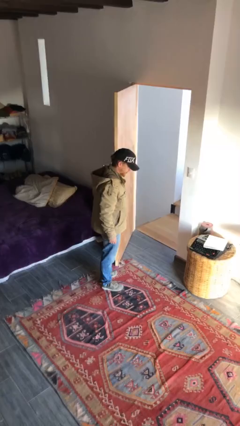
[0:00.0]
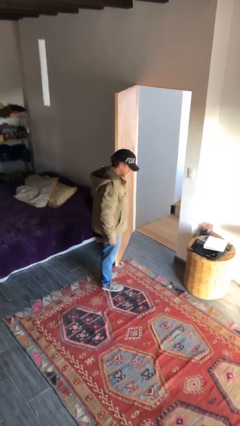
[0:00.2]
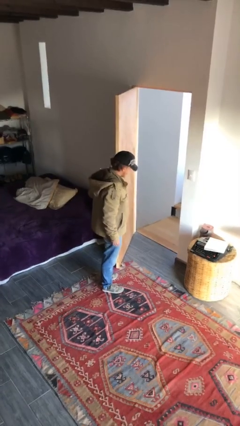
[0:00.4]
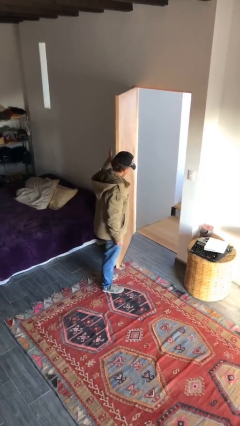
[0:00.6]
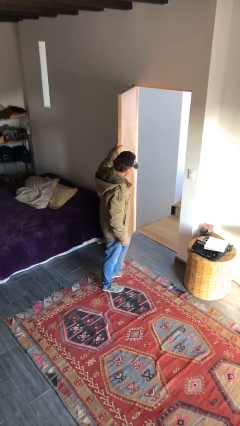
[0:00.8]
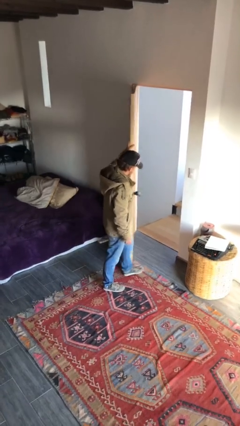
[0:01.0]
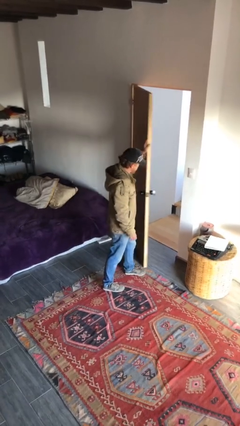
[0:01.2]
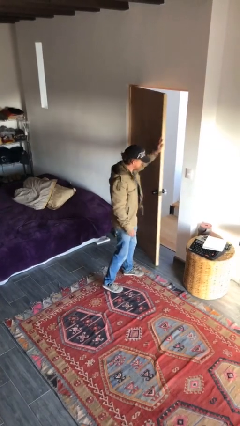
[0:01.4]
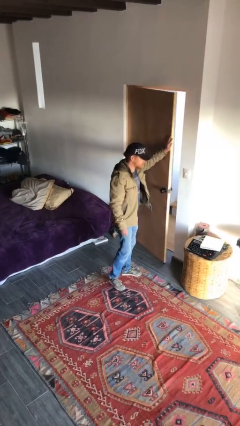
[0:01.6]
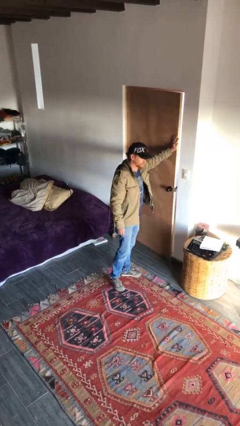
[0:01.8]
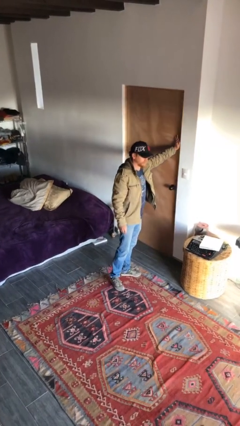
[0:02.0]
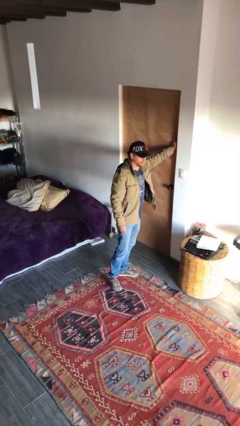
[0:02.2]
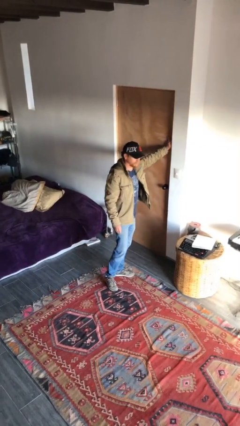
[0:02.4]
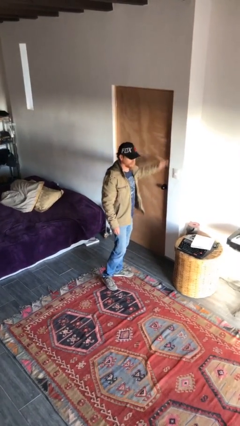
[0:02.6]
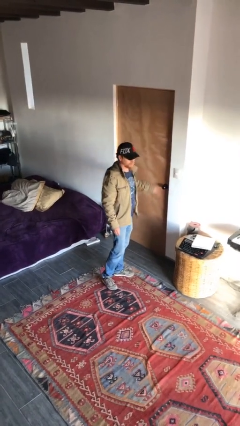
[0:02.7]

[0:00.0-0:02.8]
person closes facility door

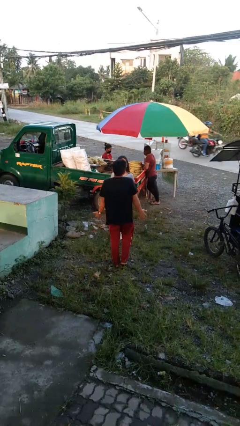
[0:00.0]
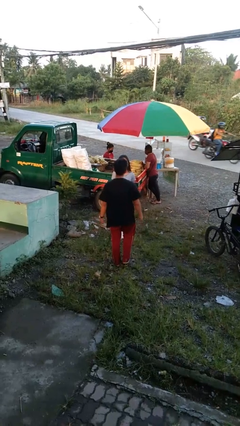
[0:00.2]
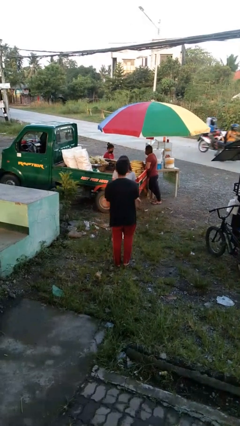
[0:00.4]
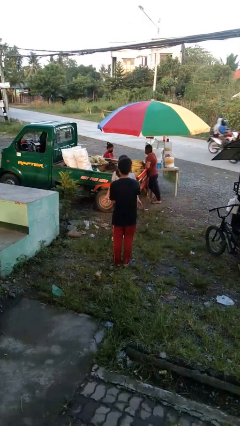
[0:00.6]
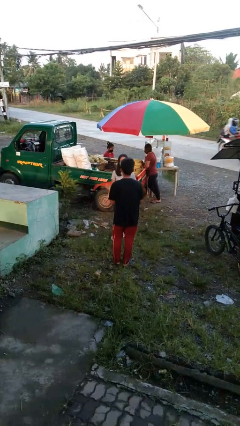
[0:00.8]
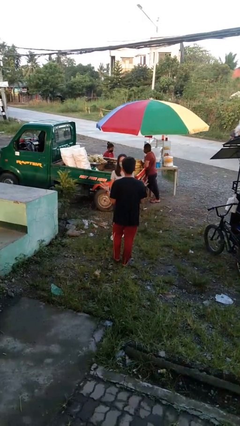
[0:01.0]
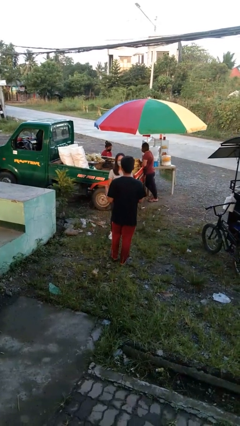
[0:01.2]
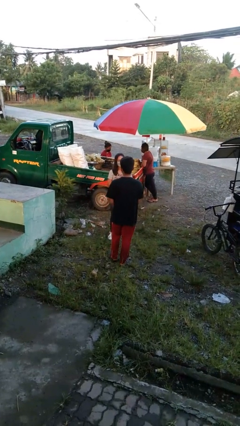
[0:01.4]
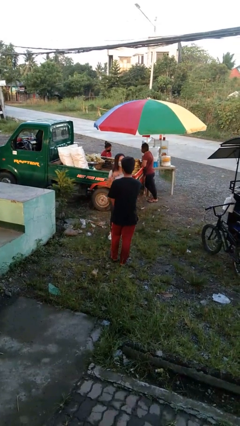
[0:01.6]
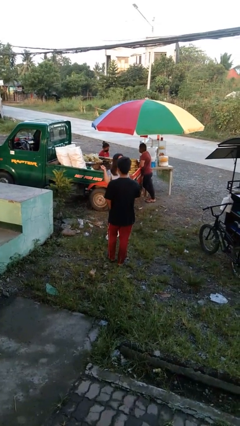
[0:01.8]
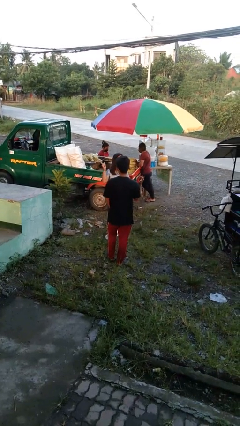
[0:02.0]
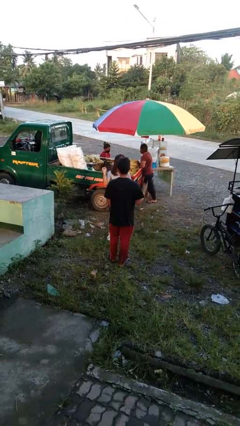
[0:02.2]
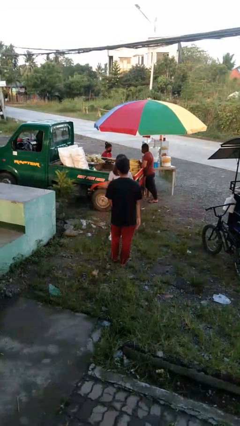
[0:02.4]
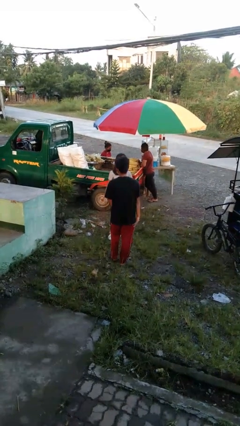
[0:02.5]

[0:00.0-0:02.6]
person talks to person

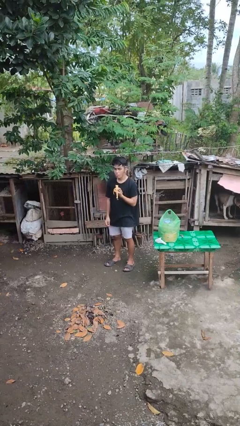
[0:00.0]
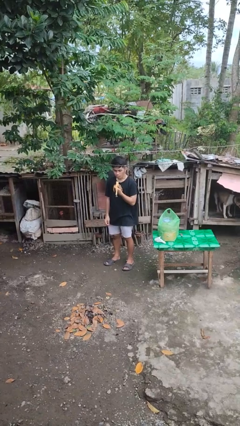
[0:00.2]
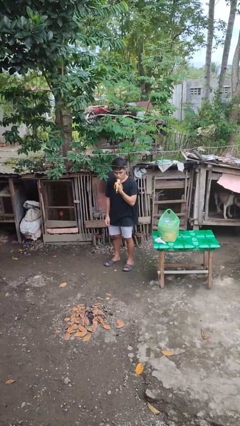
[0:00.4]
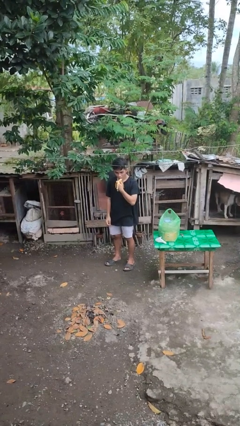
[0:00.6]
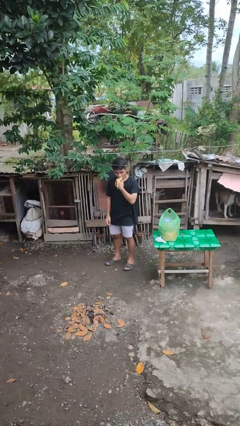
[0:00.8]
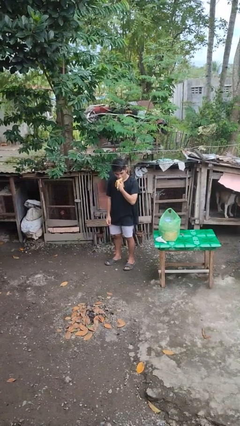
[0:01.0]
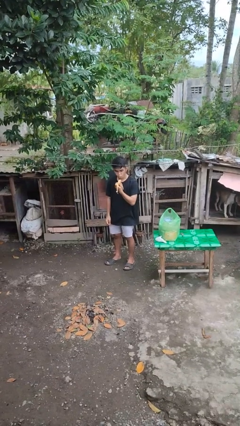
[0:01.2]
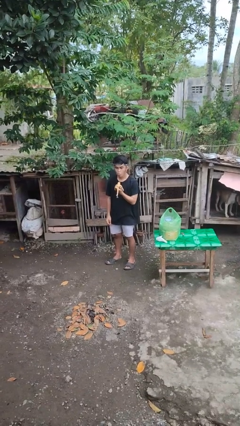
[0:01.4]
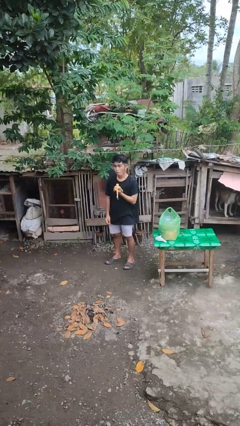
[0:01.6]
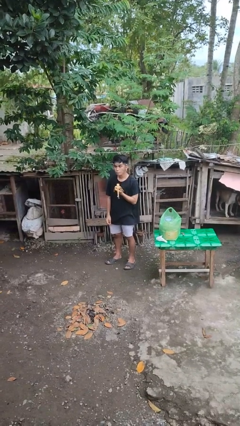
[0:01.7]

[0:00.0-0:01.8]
person eats banana

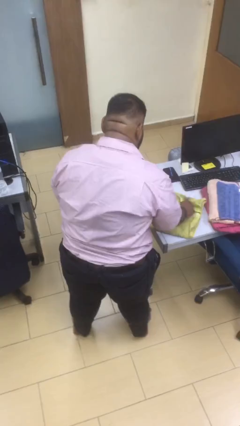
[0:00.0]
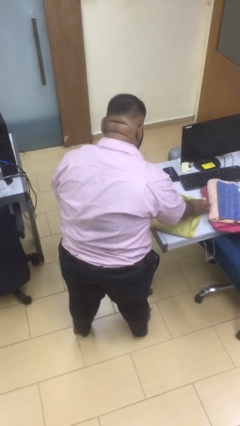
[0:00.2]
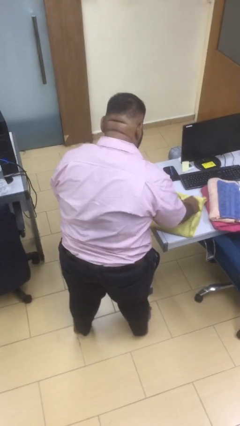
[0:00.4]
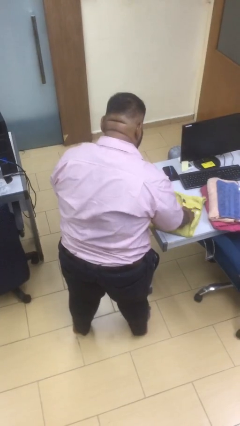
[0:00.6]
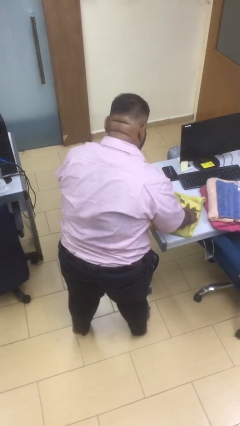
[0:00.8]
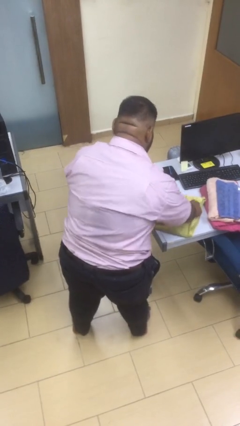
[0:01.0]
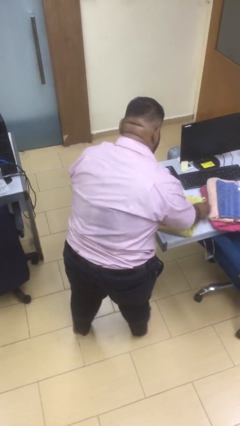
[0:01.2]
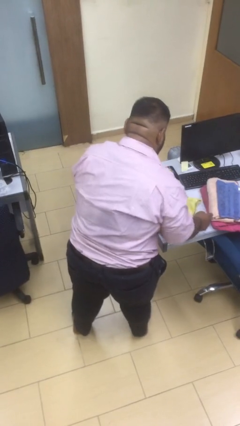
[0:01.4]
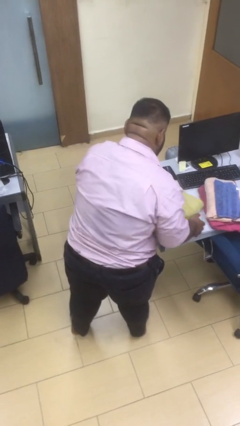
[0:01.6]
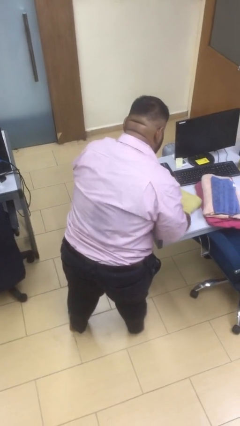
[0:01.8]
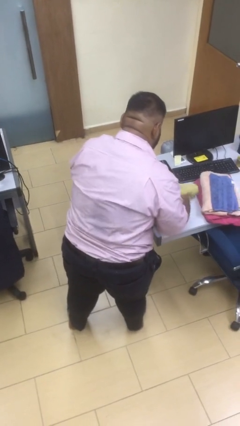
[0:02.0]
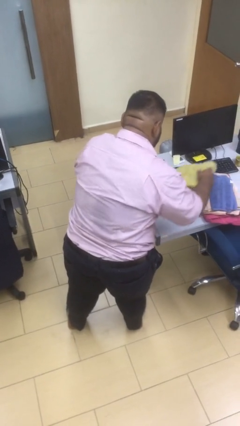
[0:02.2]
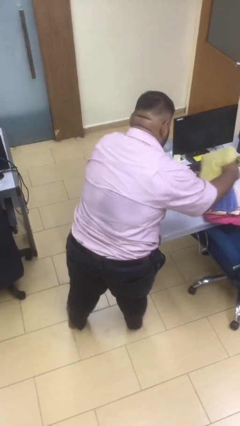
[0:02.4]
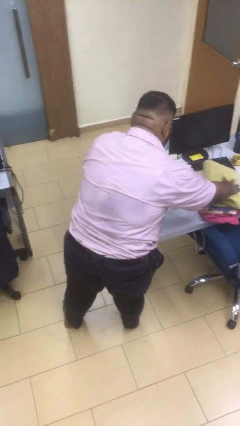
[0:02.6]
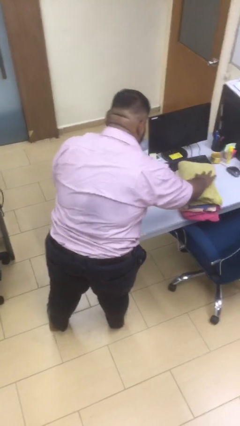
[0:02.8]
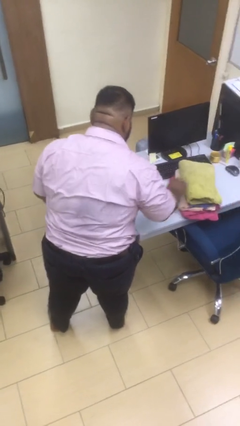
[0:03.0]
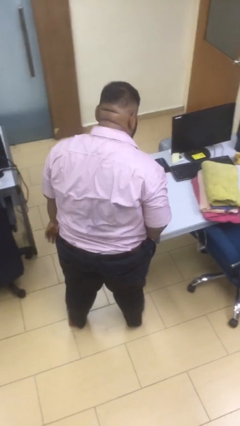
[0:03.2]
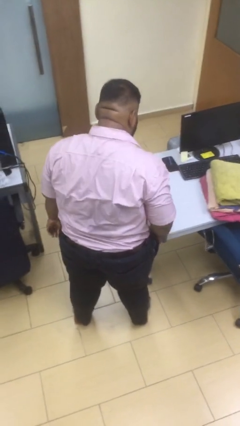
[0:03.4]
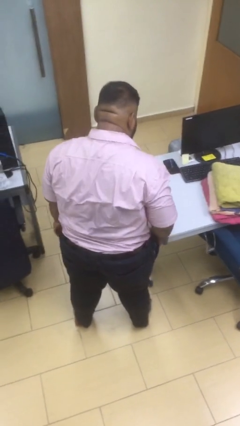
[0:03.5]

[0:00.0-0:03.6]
person folds towel

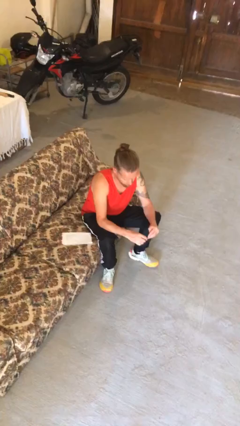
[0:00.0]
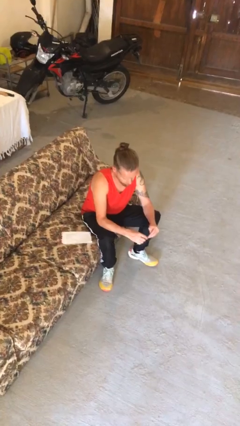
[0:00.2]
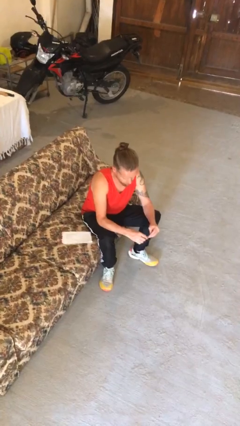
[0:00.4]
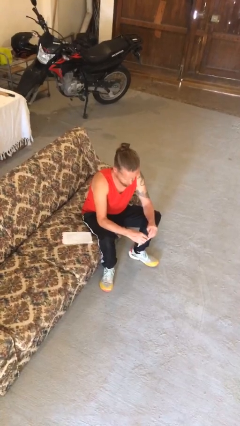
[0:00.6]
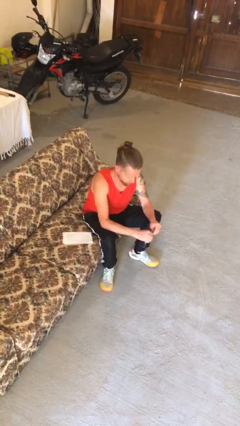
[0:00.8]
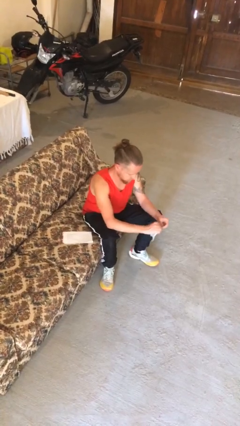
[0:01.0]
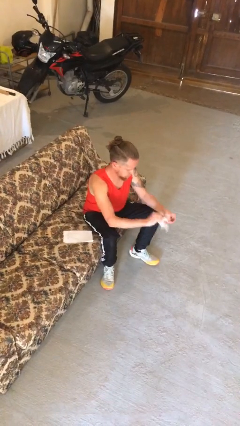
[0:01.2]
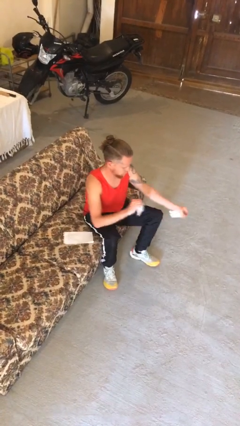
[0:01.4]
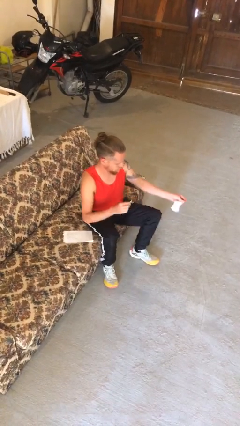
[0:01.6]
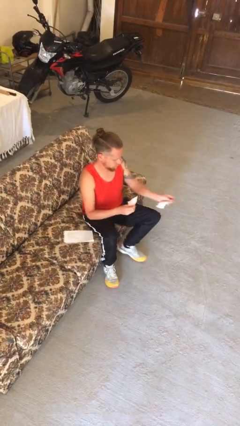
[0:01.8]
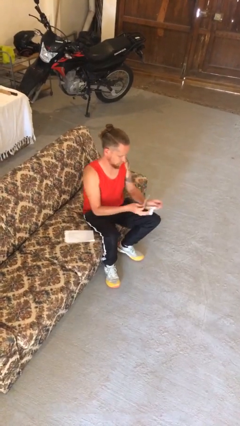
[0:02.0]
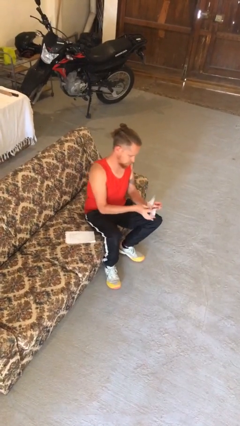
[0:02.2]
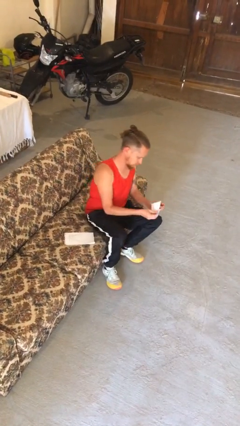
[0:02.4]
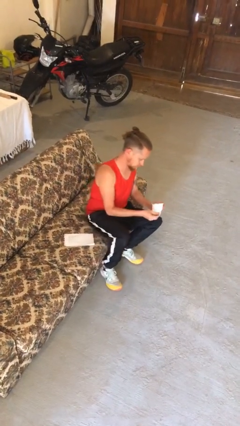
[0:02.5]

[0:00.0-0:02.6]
person tears paper

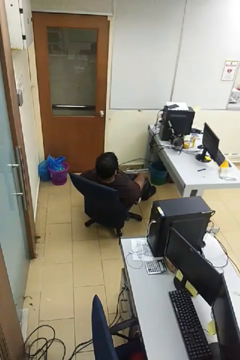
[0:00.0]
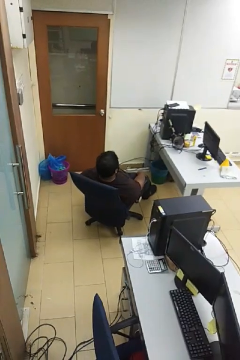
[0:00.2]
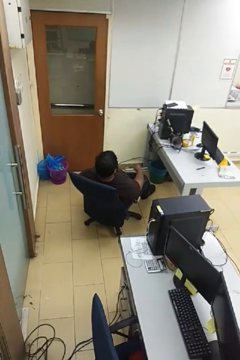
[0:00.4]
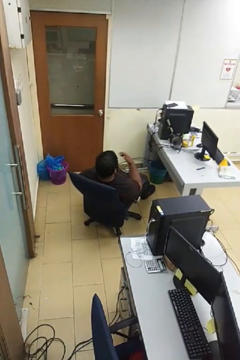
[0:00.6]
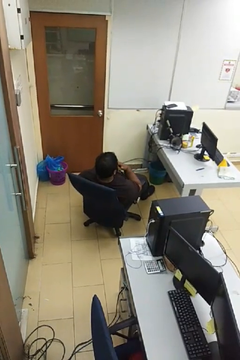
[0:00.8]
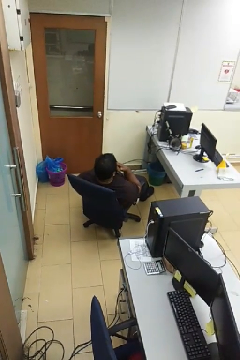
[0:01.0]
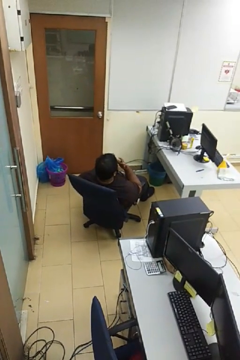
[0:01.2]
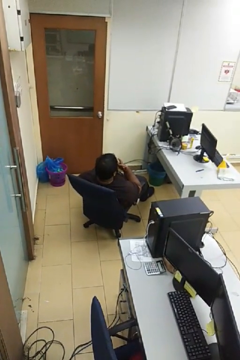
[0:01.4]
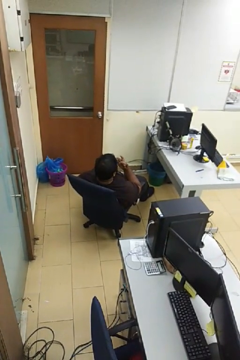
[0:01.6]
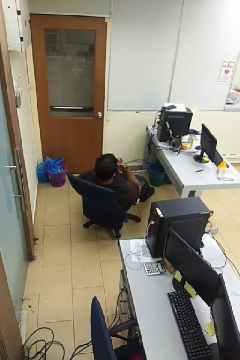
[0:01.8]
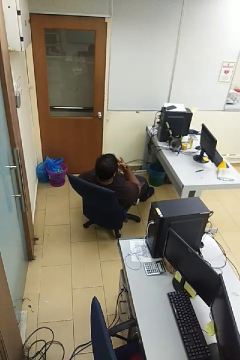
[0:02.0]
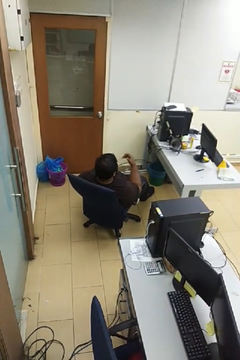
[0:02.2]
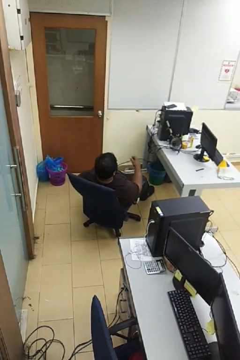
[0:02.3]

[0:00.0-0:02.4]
person licks fingers

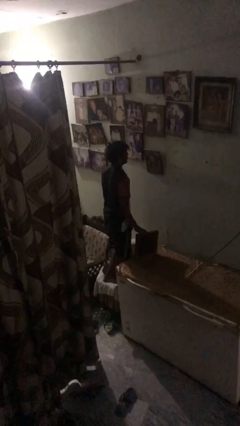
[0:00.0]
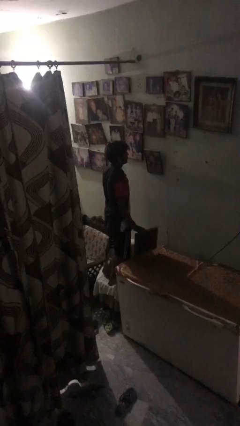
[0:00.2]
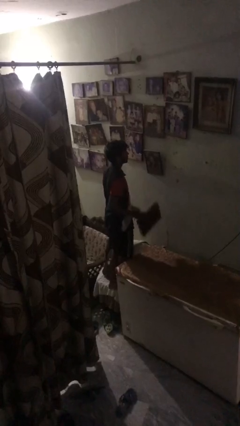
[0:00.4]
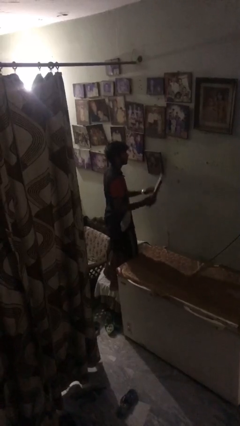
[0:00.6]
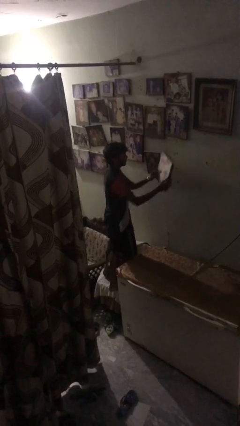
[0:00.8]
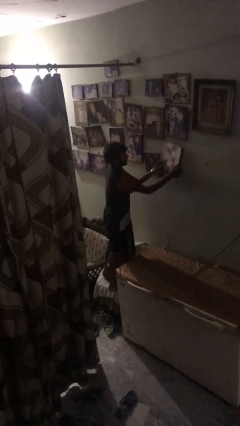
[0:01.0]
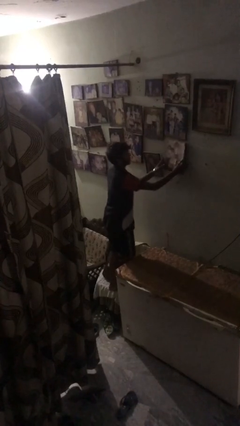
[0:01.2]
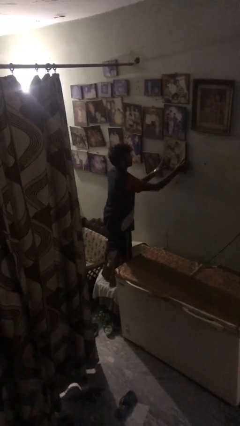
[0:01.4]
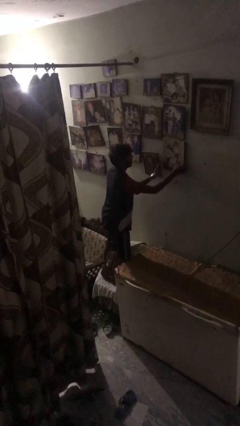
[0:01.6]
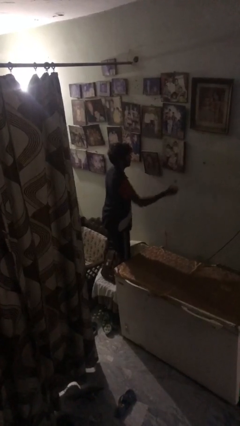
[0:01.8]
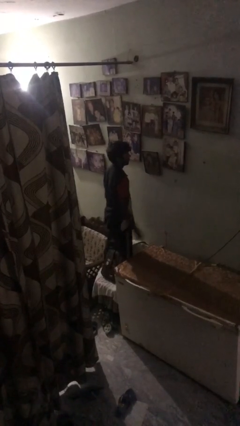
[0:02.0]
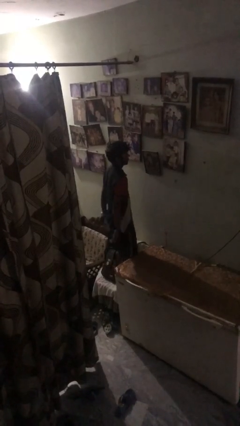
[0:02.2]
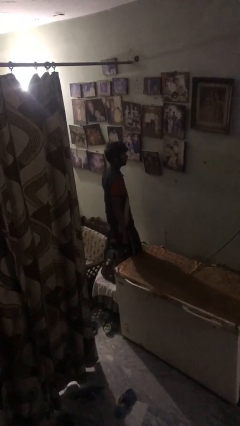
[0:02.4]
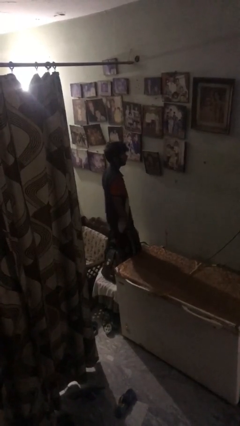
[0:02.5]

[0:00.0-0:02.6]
person puts up picture frame
